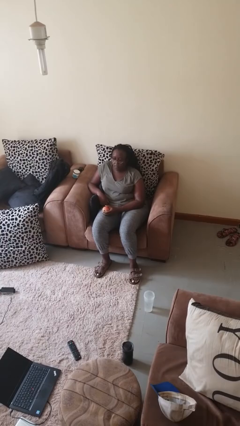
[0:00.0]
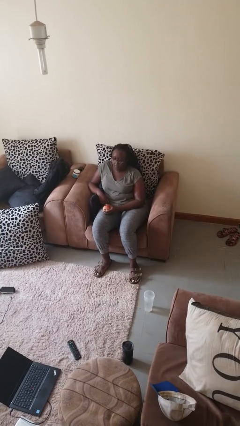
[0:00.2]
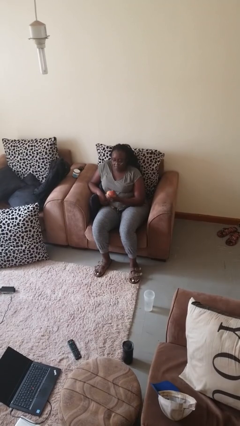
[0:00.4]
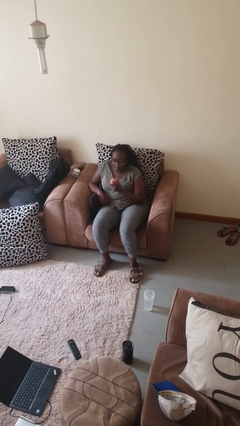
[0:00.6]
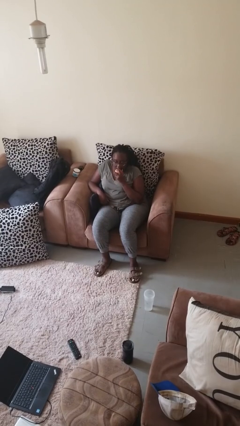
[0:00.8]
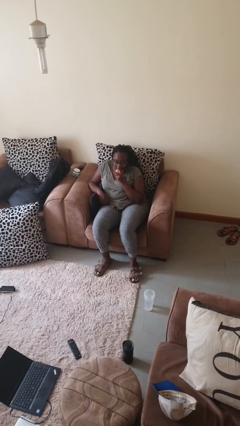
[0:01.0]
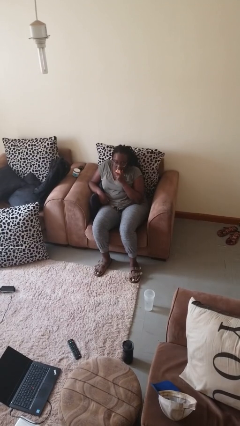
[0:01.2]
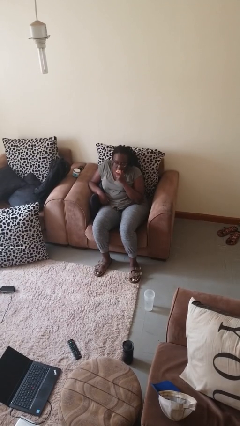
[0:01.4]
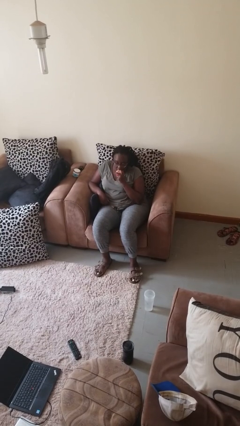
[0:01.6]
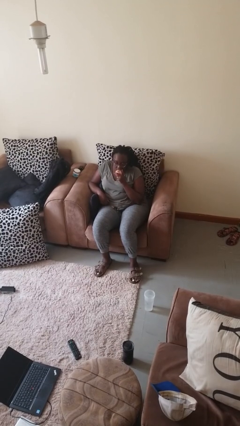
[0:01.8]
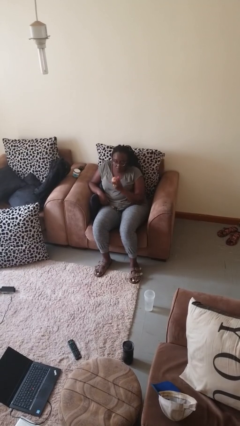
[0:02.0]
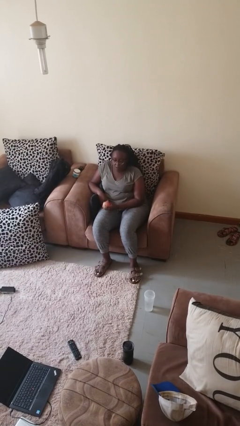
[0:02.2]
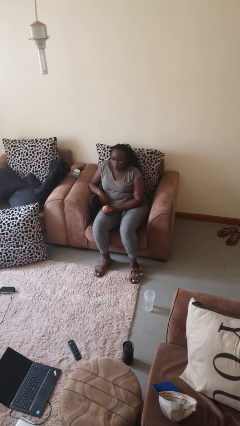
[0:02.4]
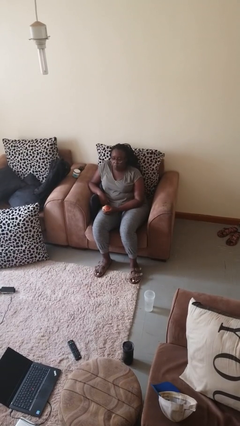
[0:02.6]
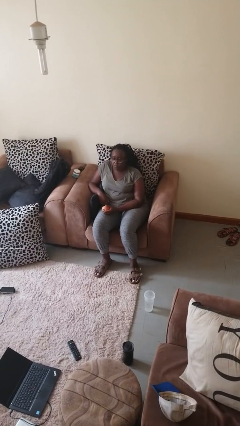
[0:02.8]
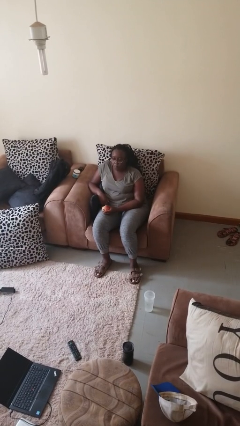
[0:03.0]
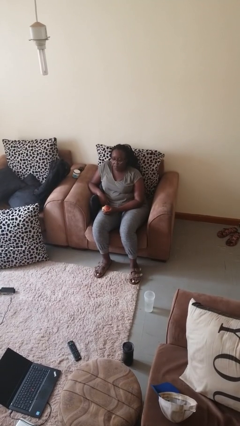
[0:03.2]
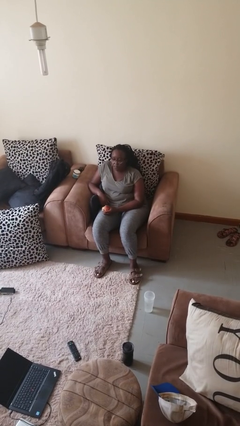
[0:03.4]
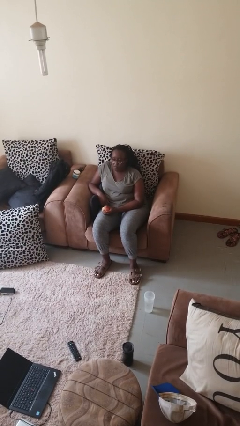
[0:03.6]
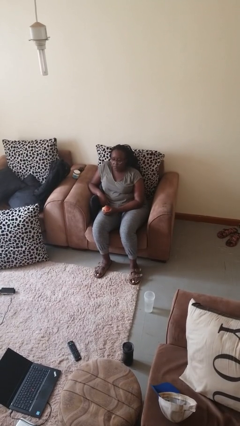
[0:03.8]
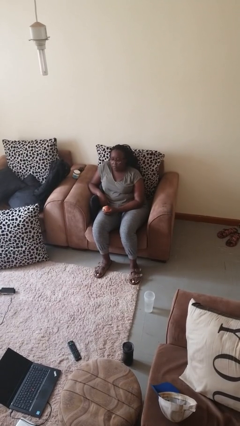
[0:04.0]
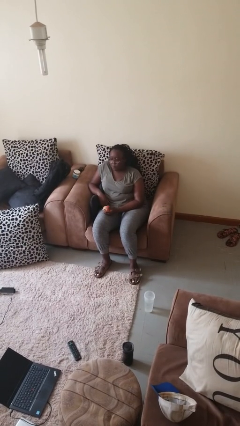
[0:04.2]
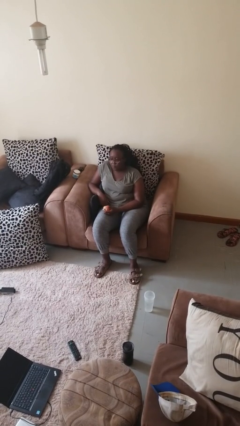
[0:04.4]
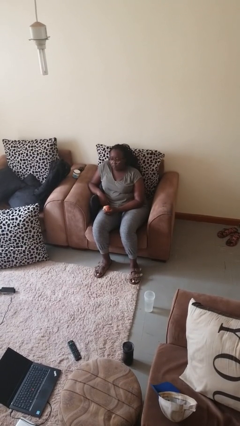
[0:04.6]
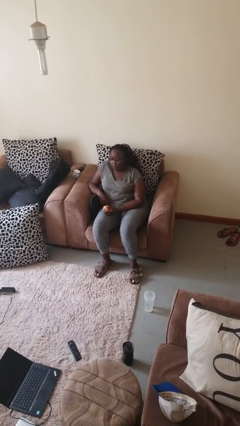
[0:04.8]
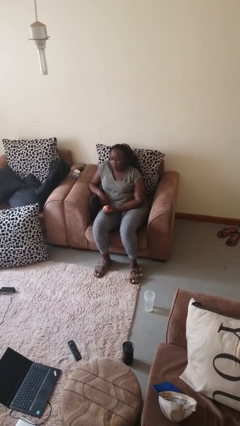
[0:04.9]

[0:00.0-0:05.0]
person eats apple

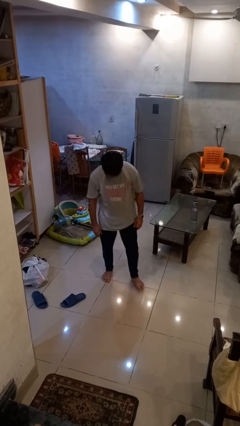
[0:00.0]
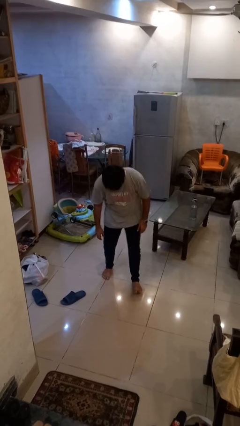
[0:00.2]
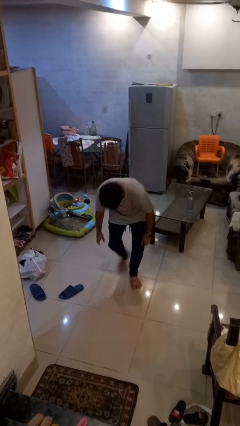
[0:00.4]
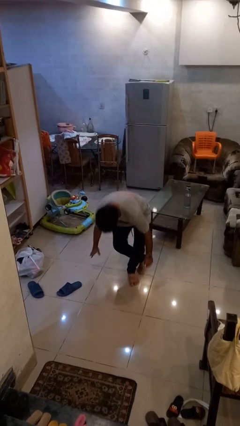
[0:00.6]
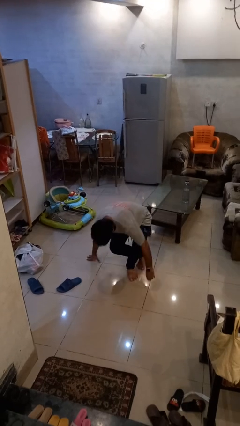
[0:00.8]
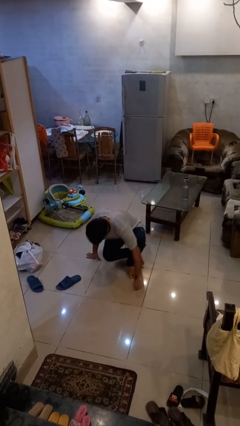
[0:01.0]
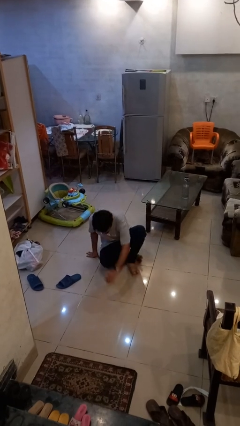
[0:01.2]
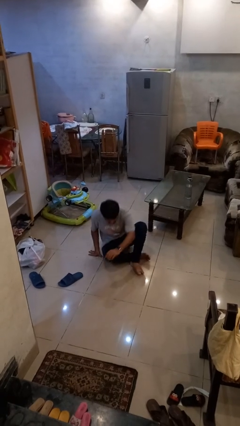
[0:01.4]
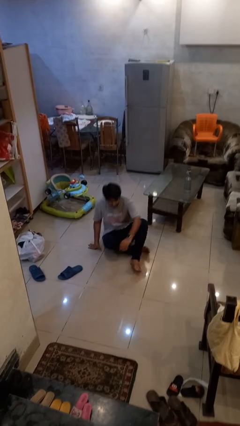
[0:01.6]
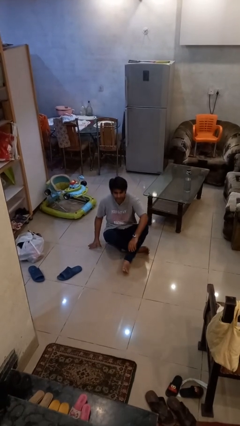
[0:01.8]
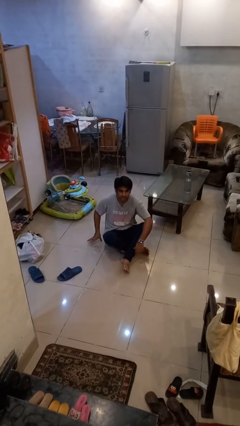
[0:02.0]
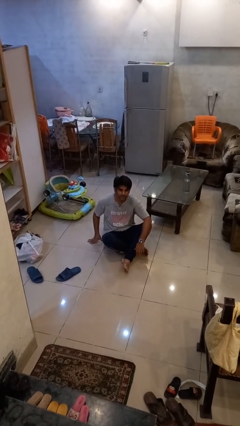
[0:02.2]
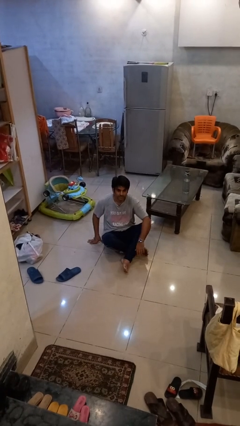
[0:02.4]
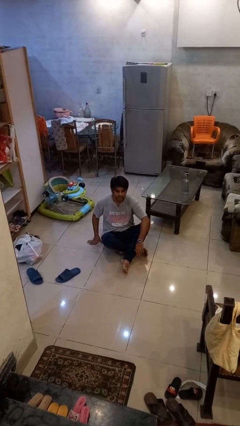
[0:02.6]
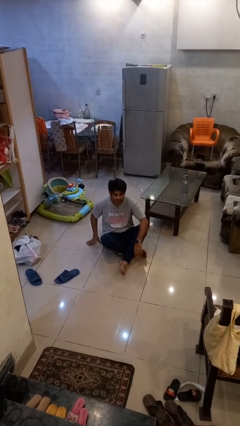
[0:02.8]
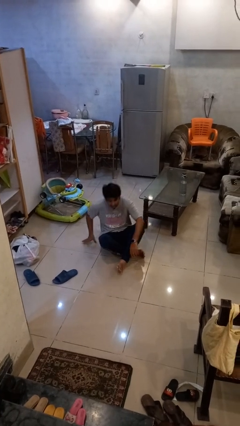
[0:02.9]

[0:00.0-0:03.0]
person sits crisscross

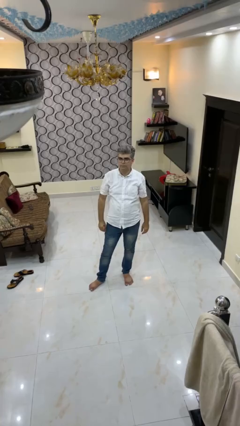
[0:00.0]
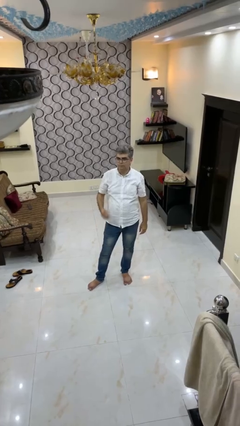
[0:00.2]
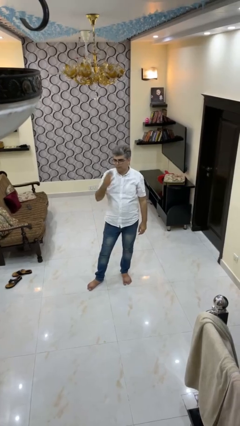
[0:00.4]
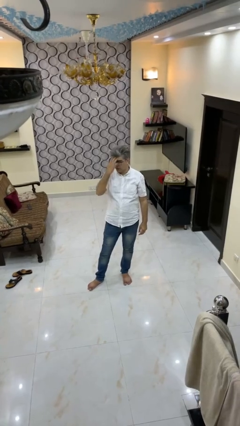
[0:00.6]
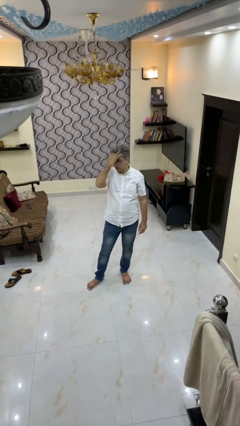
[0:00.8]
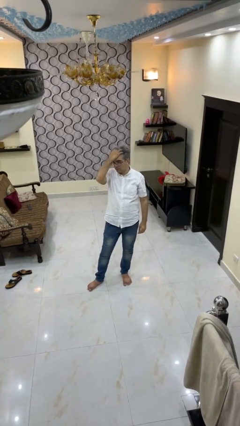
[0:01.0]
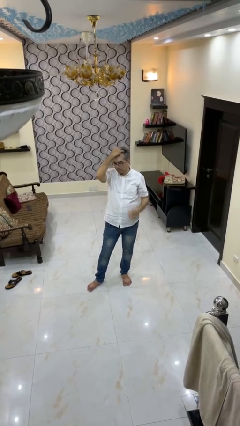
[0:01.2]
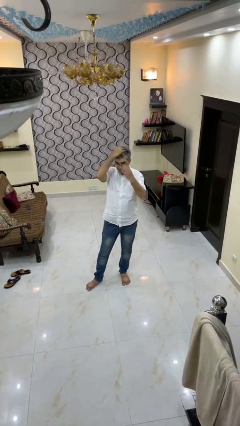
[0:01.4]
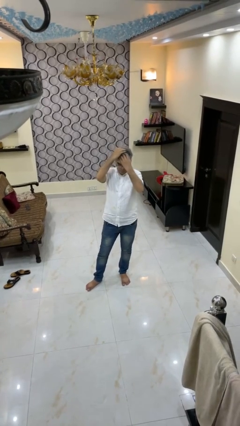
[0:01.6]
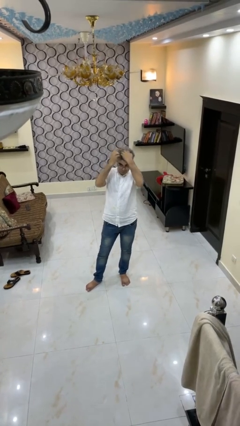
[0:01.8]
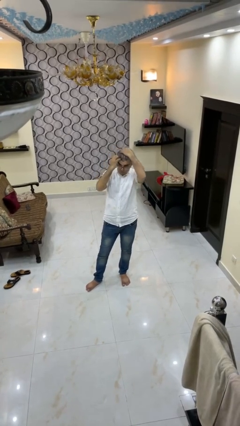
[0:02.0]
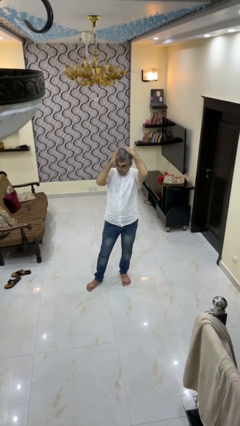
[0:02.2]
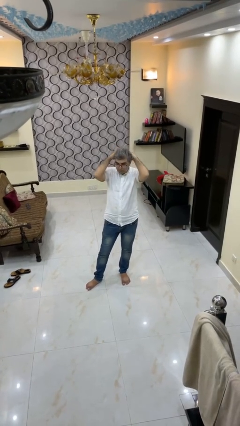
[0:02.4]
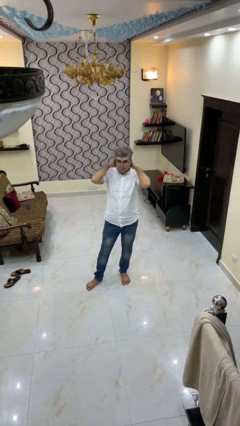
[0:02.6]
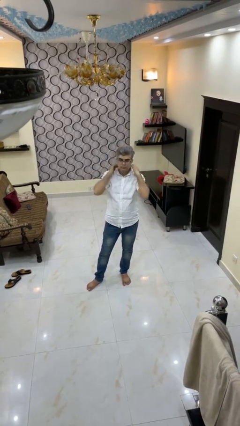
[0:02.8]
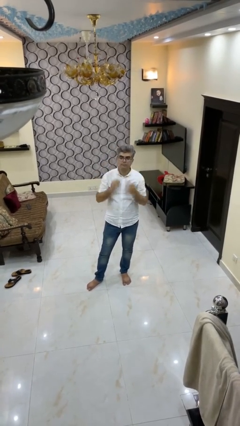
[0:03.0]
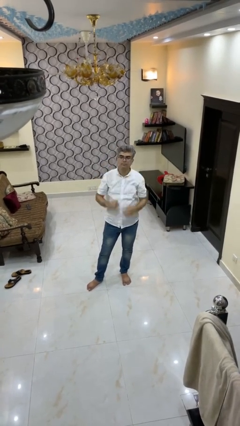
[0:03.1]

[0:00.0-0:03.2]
person strokes hair

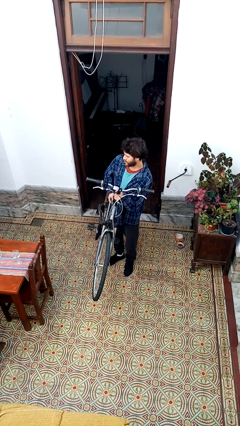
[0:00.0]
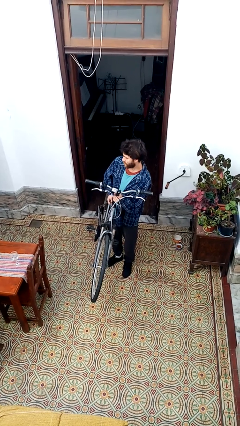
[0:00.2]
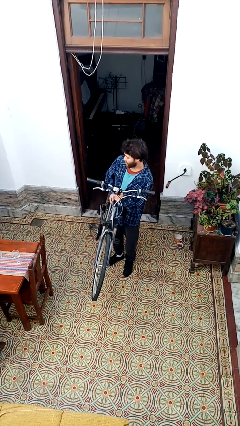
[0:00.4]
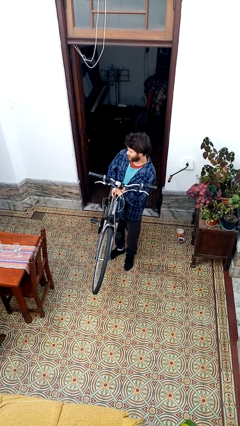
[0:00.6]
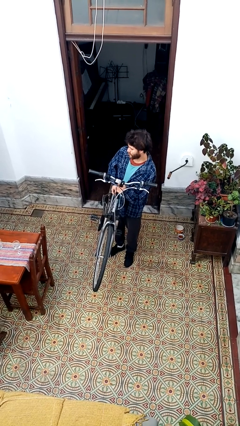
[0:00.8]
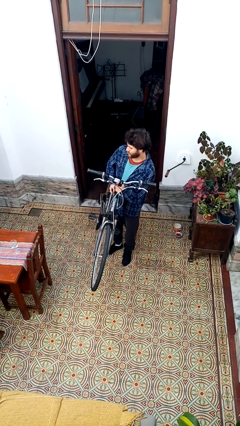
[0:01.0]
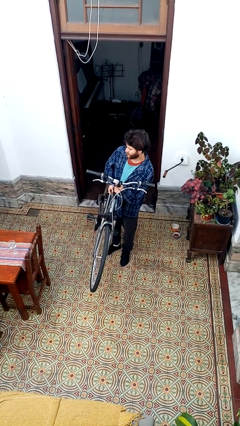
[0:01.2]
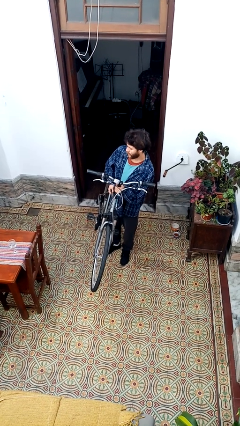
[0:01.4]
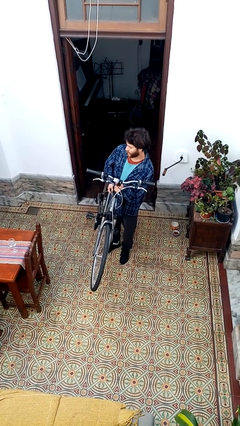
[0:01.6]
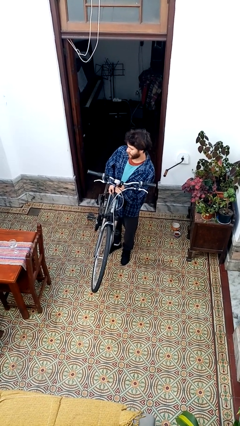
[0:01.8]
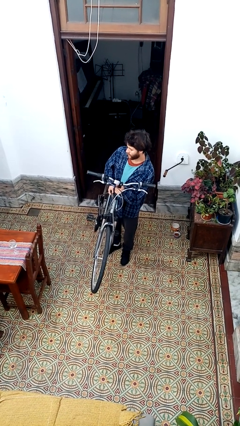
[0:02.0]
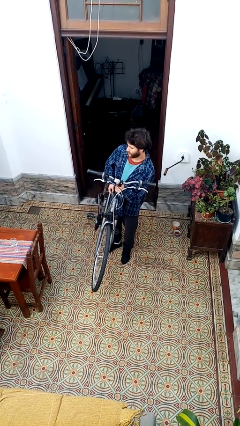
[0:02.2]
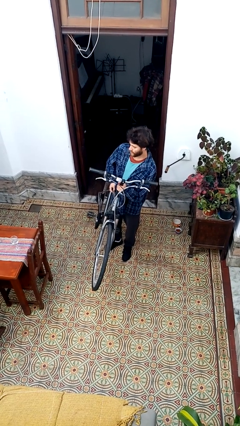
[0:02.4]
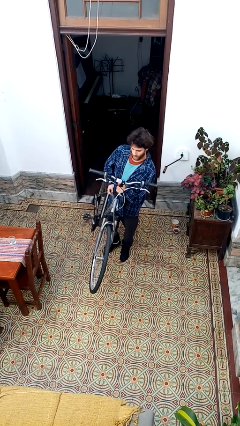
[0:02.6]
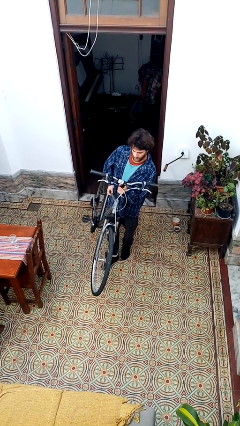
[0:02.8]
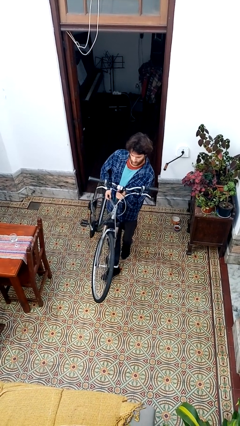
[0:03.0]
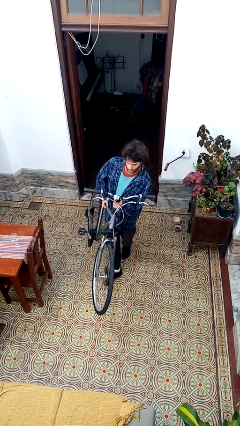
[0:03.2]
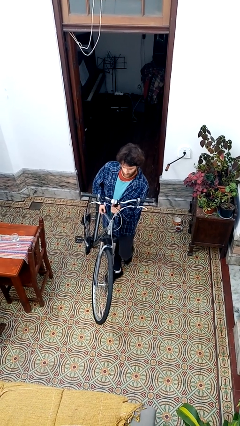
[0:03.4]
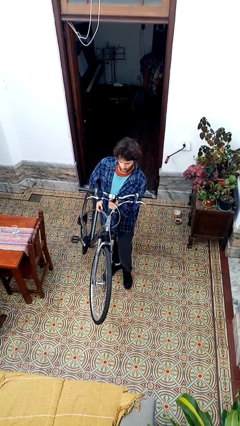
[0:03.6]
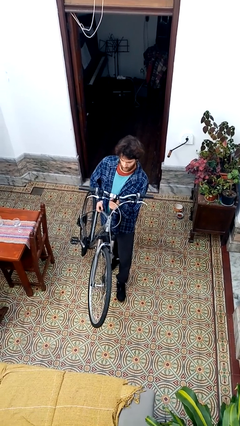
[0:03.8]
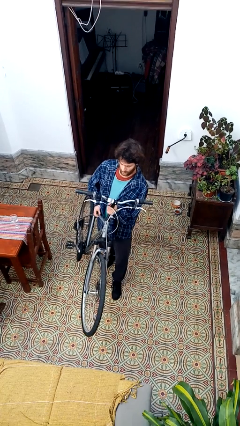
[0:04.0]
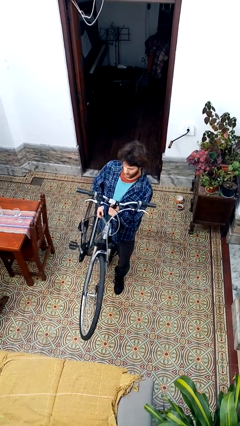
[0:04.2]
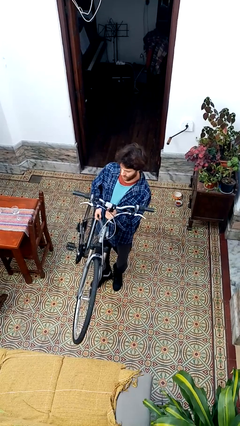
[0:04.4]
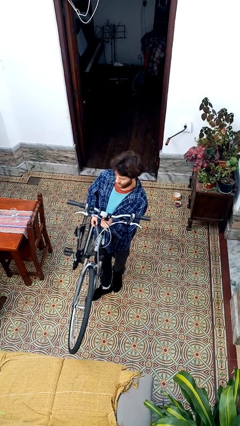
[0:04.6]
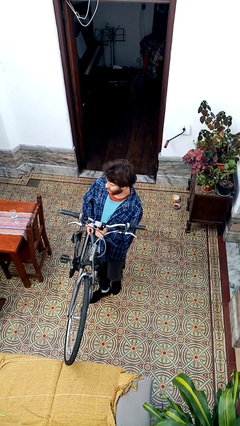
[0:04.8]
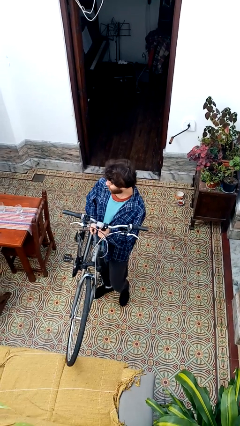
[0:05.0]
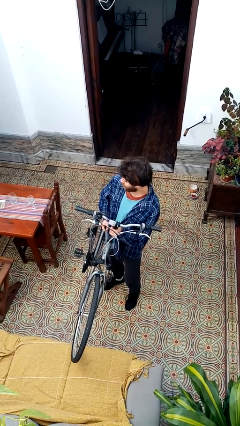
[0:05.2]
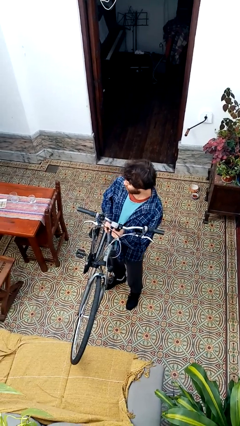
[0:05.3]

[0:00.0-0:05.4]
person carries bicycle

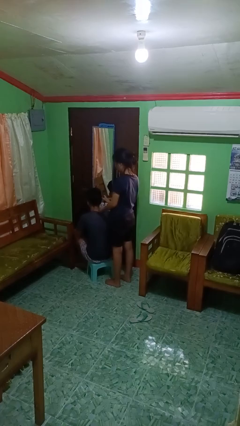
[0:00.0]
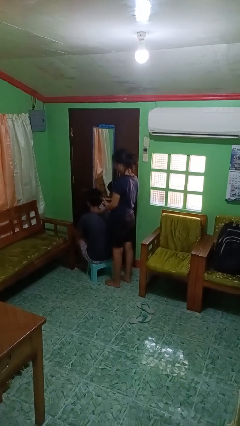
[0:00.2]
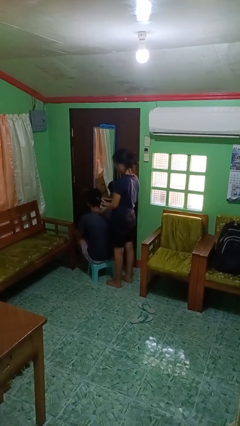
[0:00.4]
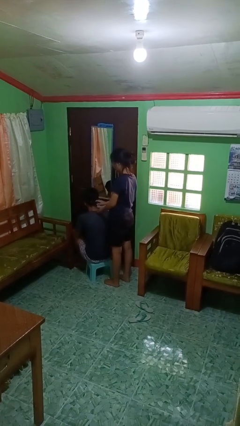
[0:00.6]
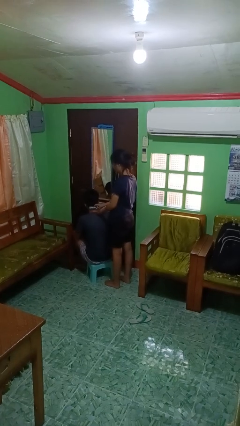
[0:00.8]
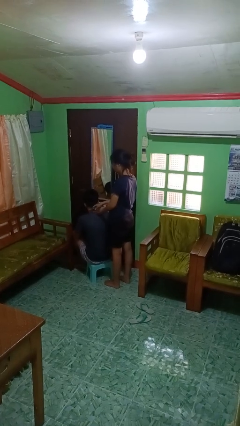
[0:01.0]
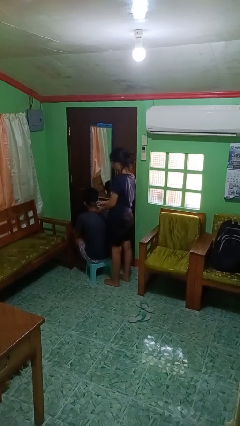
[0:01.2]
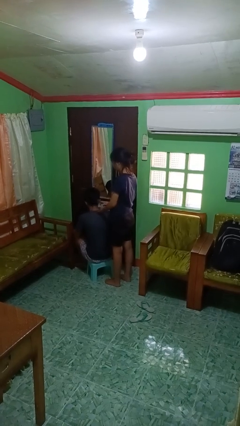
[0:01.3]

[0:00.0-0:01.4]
person brushes hair of person
